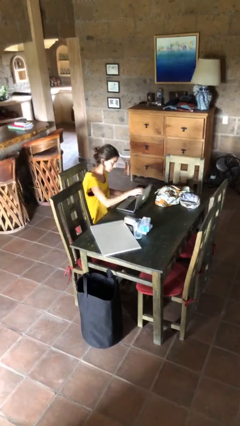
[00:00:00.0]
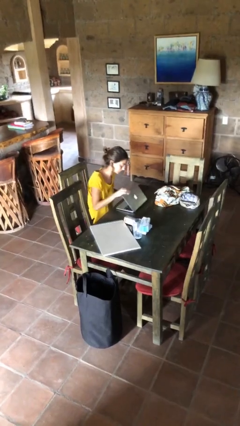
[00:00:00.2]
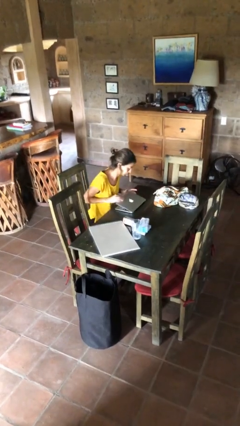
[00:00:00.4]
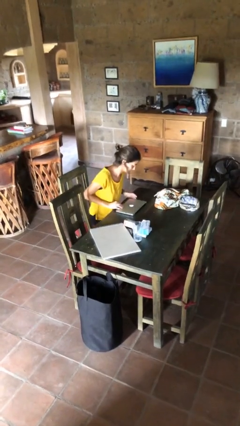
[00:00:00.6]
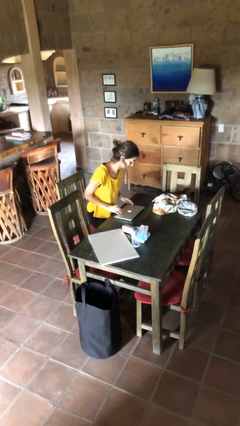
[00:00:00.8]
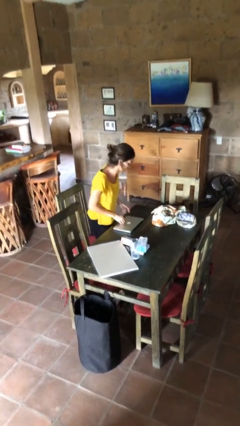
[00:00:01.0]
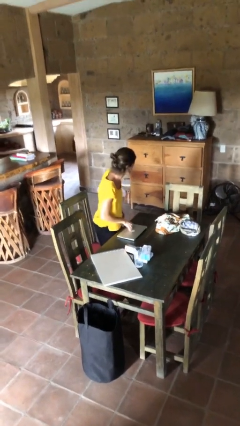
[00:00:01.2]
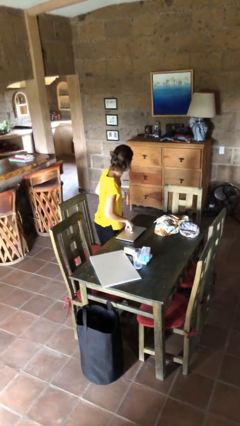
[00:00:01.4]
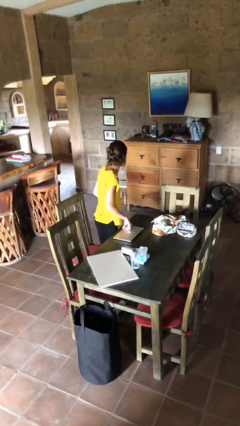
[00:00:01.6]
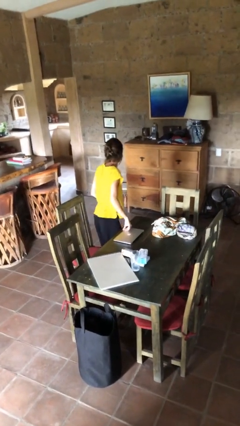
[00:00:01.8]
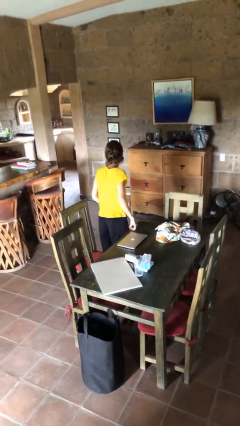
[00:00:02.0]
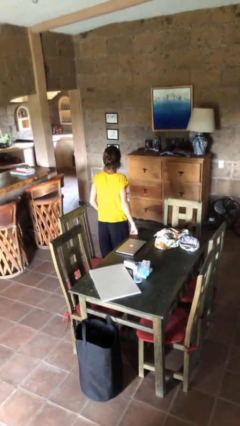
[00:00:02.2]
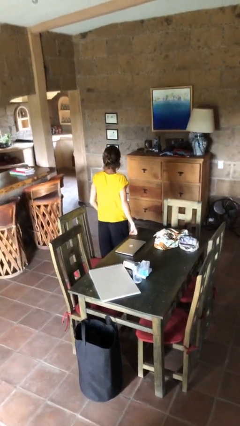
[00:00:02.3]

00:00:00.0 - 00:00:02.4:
person stands up

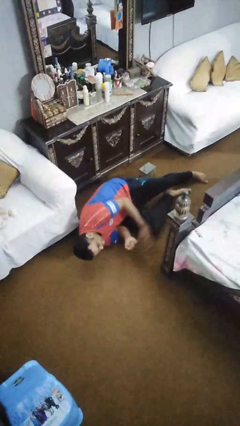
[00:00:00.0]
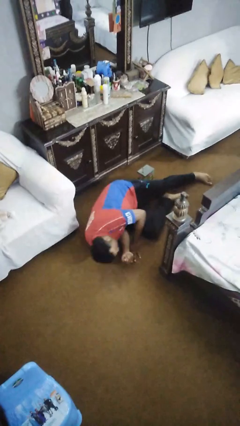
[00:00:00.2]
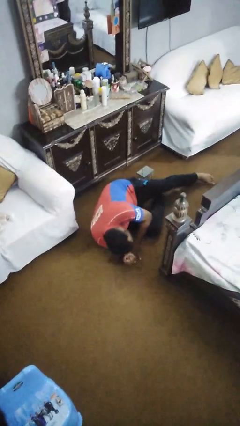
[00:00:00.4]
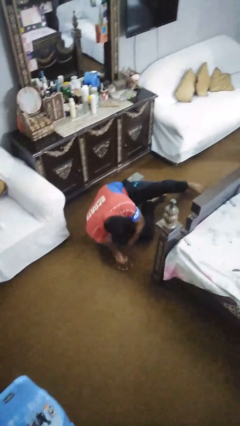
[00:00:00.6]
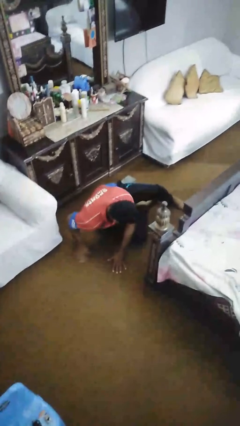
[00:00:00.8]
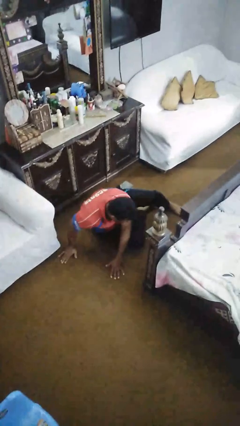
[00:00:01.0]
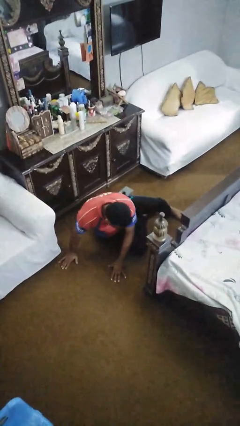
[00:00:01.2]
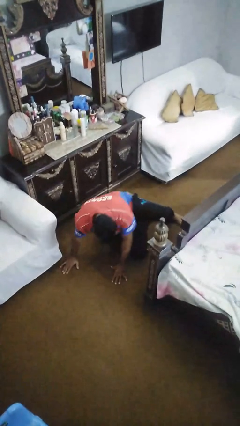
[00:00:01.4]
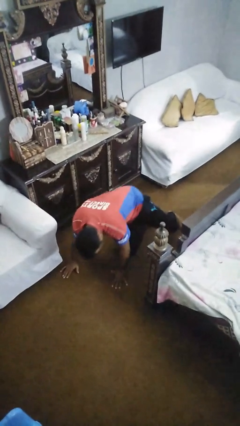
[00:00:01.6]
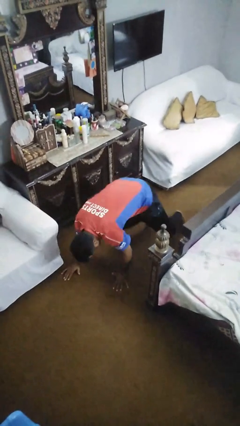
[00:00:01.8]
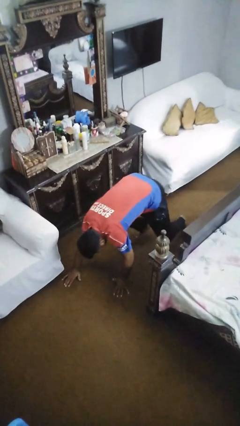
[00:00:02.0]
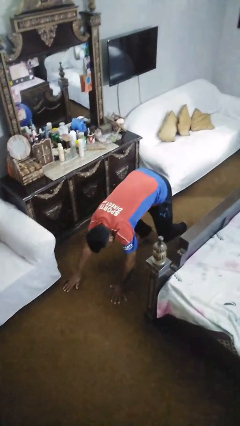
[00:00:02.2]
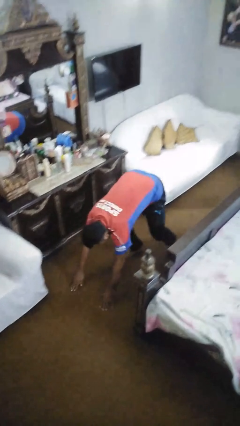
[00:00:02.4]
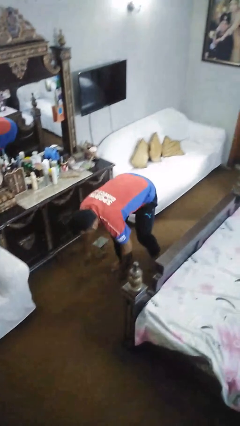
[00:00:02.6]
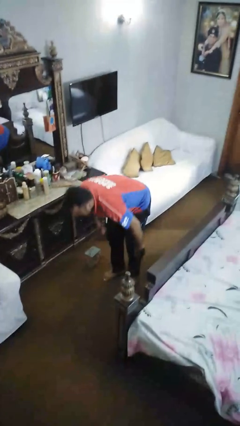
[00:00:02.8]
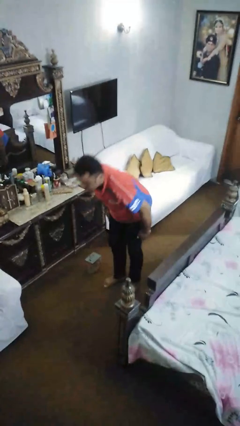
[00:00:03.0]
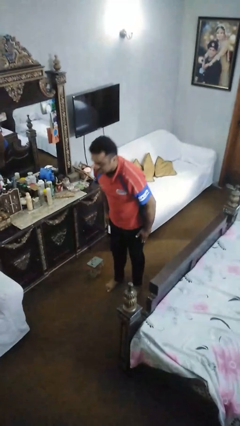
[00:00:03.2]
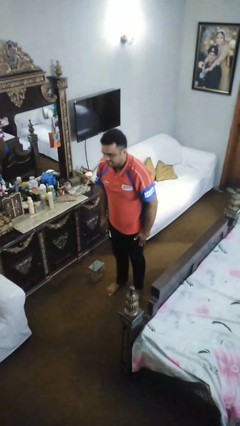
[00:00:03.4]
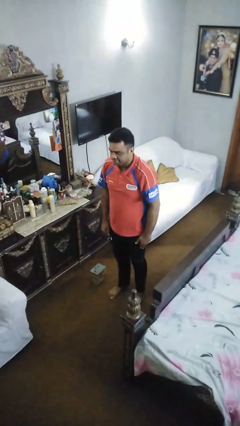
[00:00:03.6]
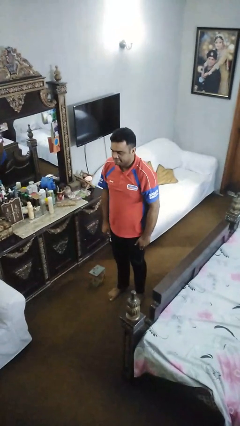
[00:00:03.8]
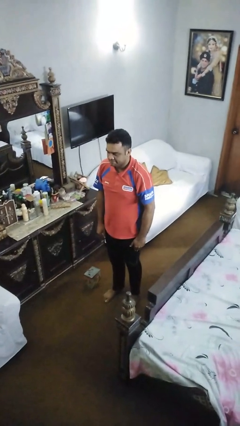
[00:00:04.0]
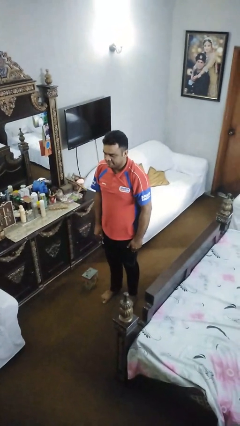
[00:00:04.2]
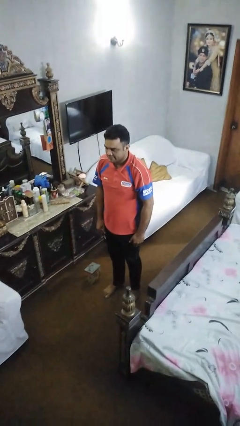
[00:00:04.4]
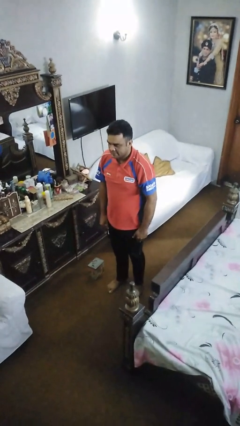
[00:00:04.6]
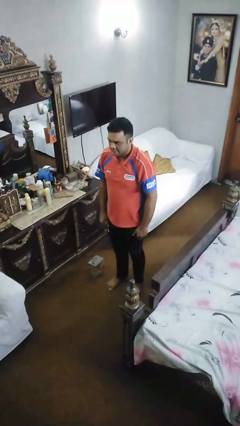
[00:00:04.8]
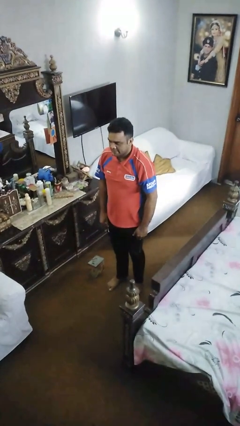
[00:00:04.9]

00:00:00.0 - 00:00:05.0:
person stands up from floor

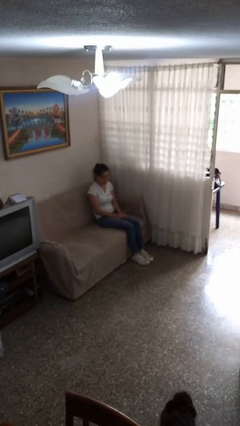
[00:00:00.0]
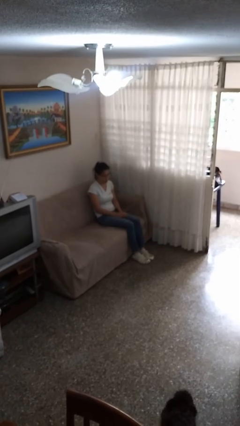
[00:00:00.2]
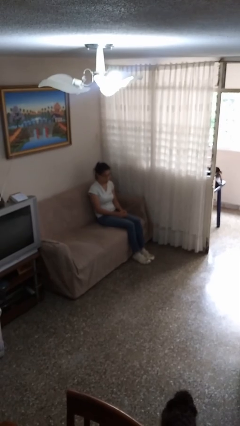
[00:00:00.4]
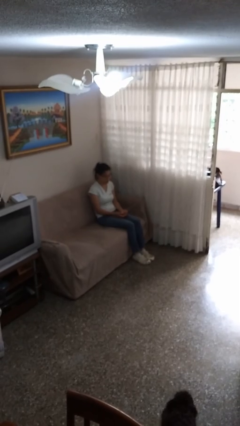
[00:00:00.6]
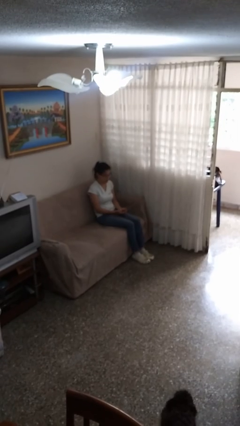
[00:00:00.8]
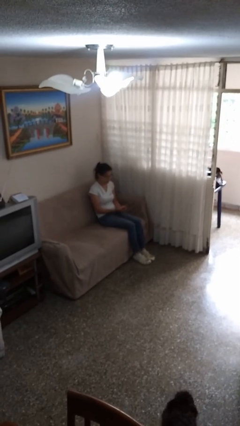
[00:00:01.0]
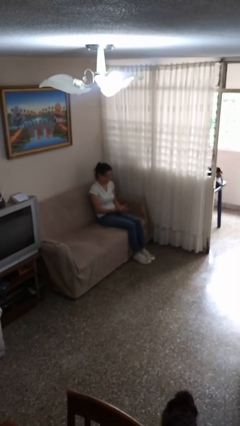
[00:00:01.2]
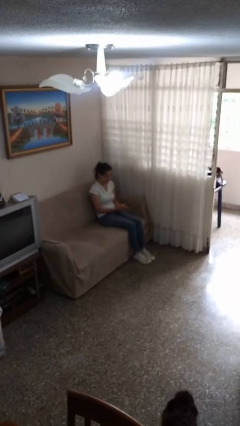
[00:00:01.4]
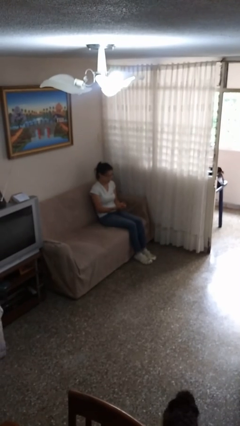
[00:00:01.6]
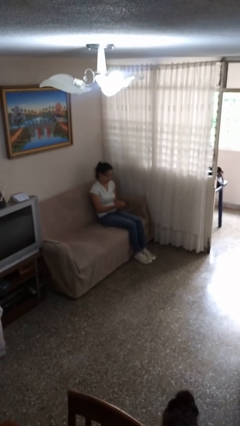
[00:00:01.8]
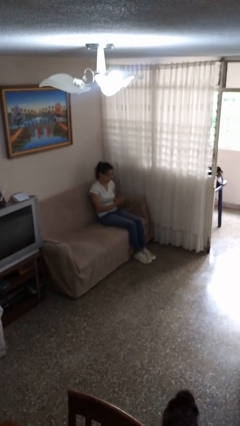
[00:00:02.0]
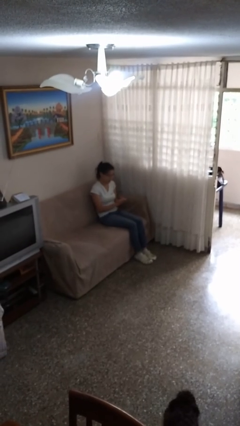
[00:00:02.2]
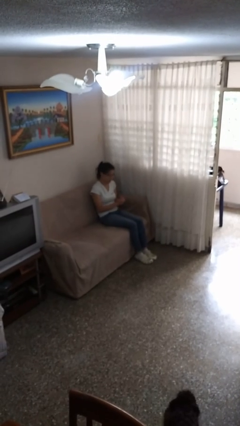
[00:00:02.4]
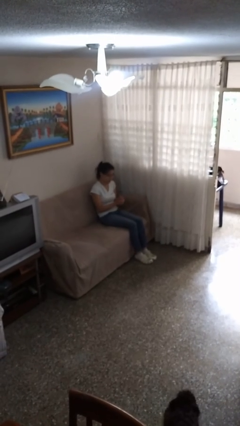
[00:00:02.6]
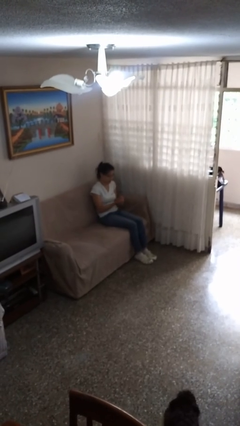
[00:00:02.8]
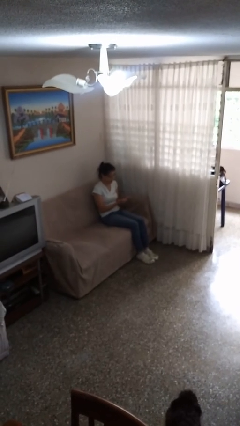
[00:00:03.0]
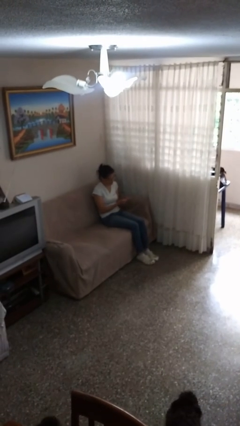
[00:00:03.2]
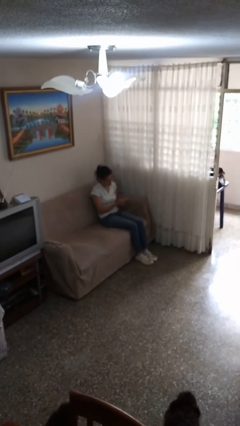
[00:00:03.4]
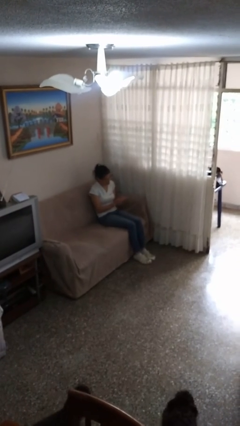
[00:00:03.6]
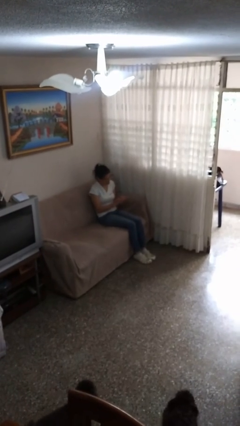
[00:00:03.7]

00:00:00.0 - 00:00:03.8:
person looks at hands in lap

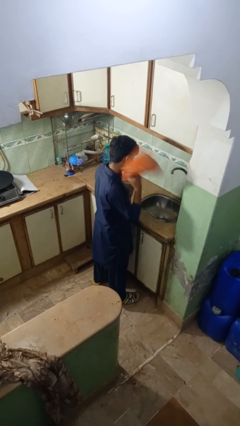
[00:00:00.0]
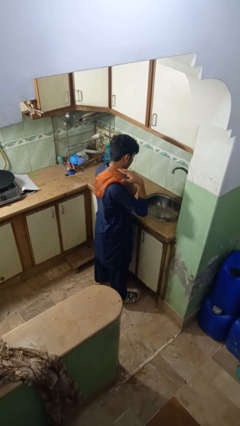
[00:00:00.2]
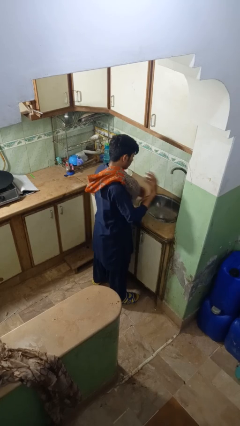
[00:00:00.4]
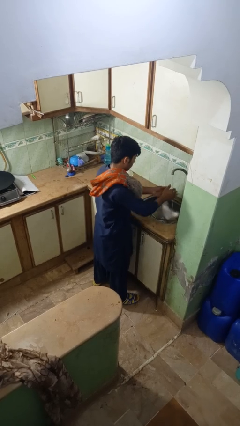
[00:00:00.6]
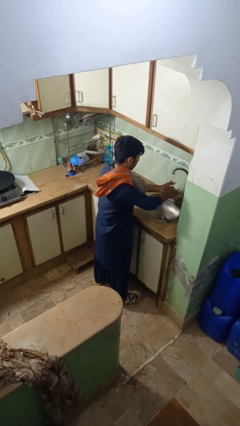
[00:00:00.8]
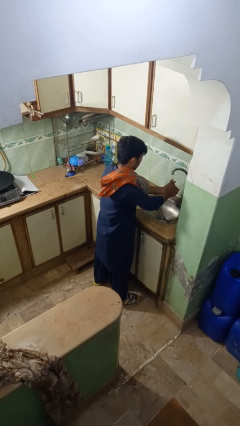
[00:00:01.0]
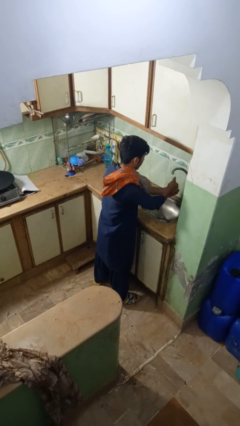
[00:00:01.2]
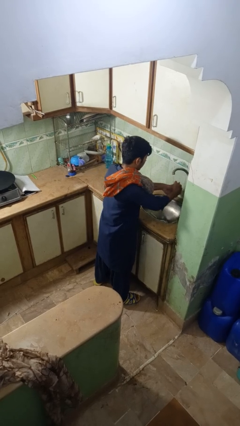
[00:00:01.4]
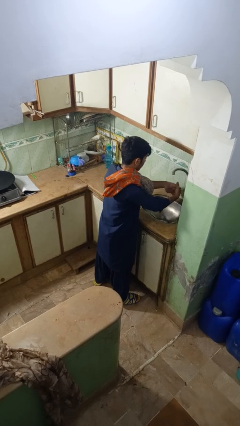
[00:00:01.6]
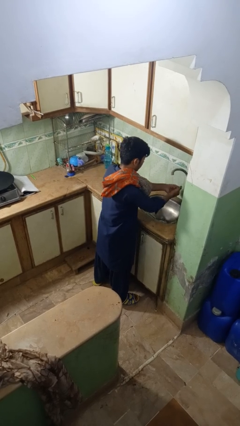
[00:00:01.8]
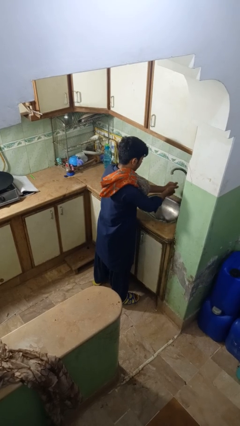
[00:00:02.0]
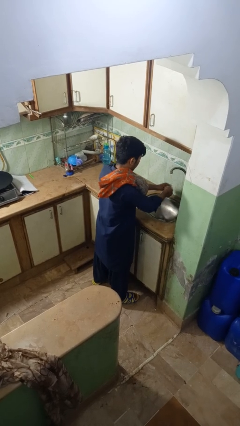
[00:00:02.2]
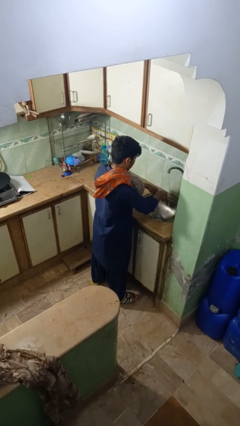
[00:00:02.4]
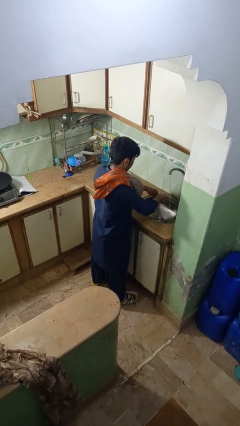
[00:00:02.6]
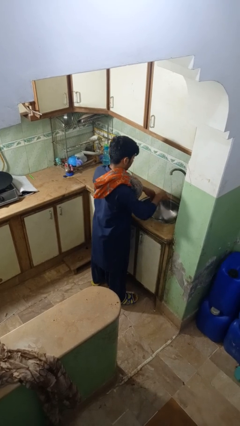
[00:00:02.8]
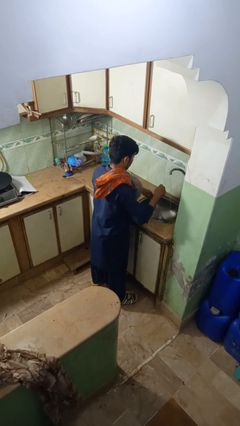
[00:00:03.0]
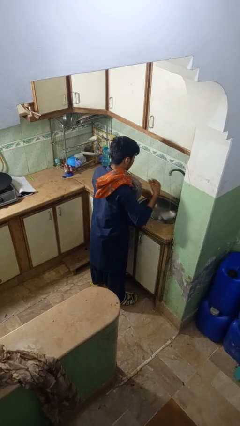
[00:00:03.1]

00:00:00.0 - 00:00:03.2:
person washes hands

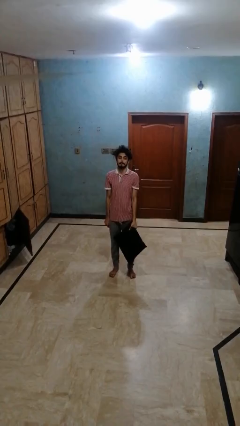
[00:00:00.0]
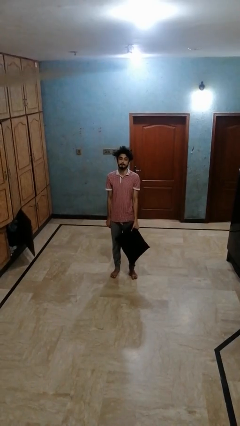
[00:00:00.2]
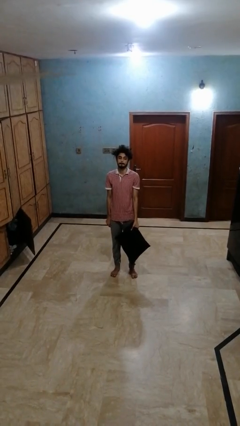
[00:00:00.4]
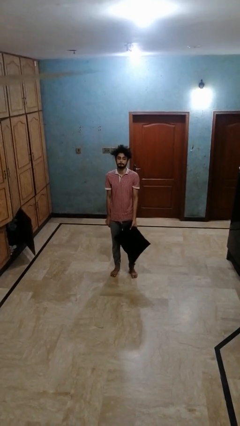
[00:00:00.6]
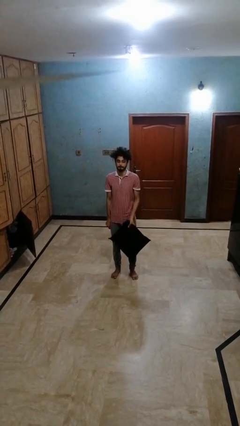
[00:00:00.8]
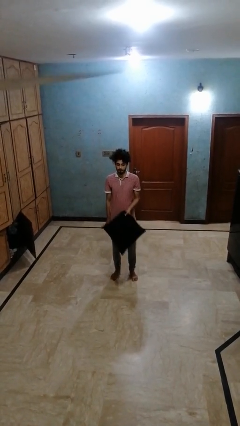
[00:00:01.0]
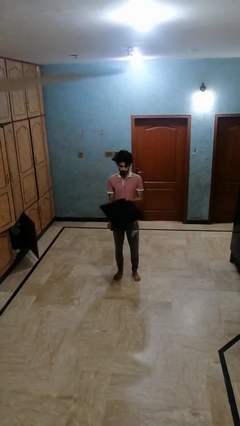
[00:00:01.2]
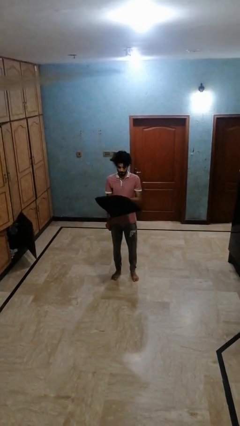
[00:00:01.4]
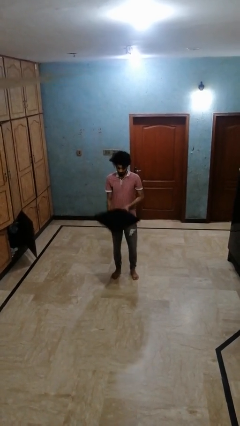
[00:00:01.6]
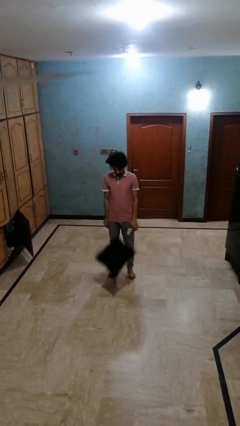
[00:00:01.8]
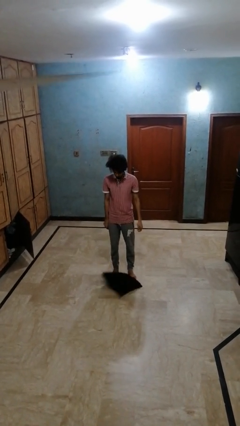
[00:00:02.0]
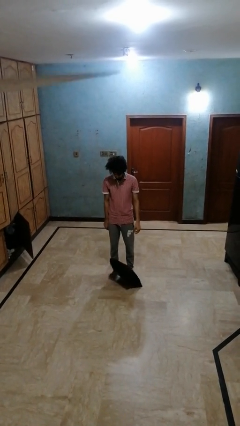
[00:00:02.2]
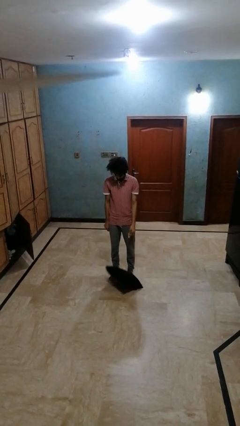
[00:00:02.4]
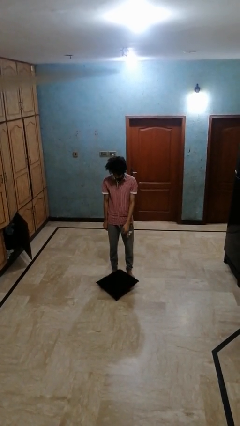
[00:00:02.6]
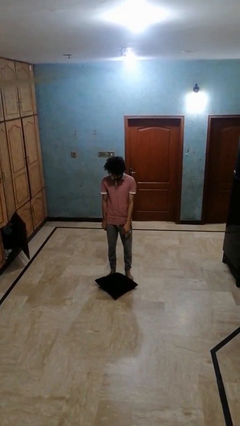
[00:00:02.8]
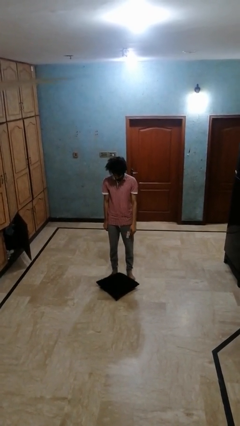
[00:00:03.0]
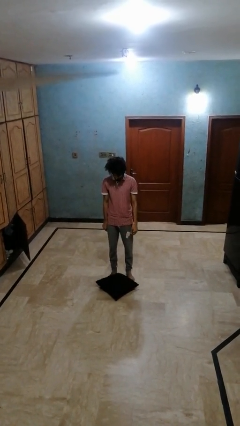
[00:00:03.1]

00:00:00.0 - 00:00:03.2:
person throws object to ground
